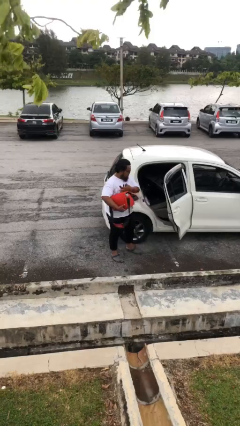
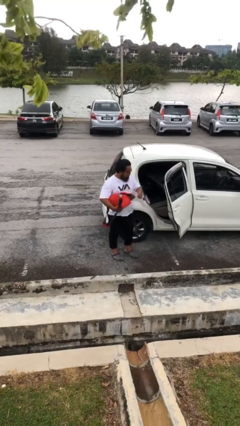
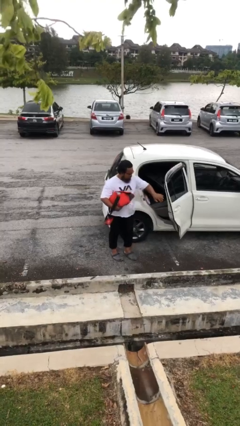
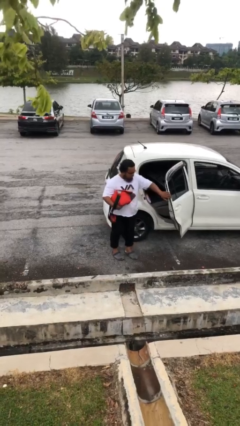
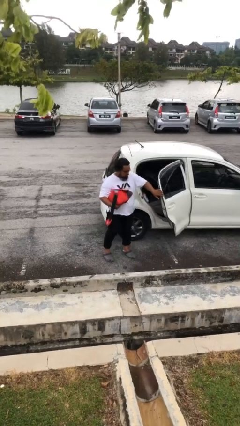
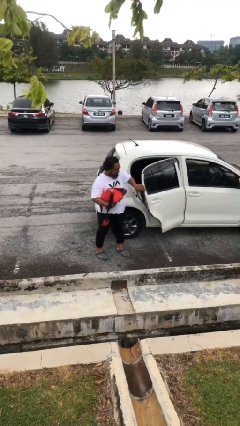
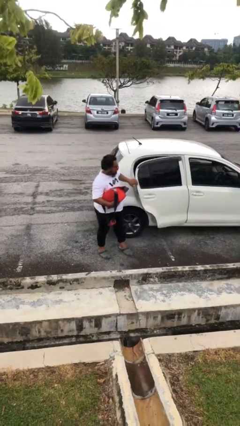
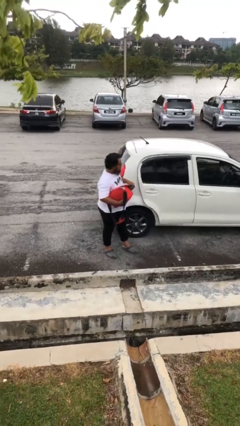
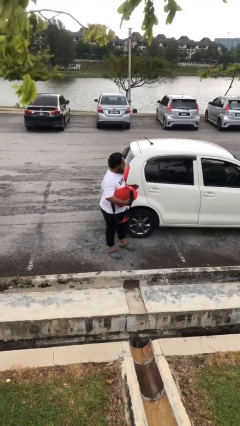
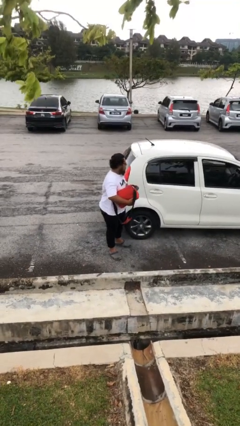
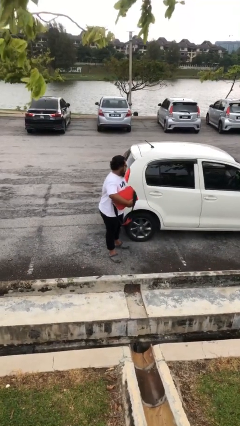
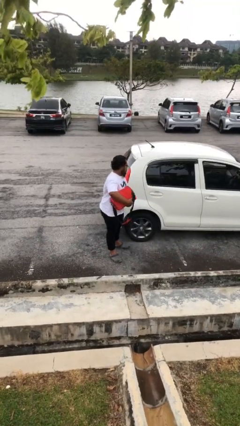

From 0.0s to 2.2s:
person closes car door

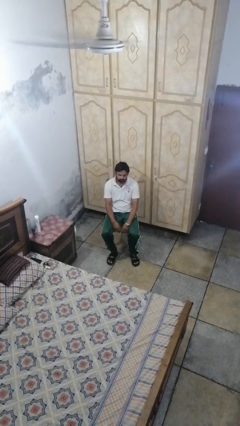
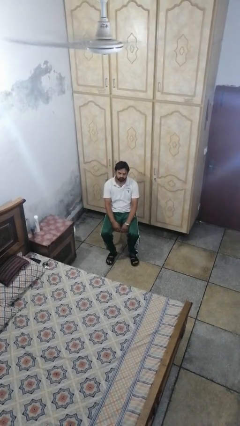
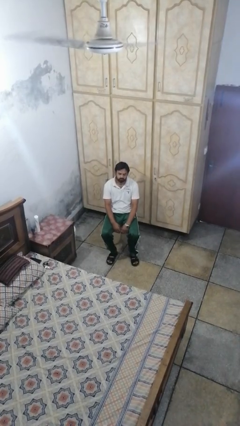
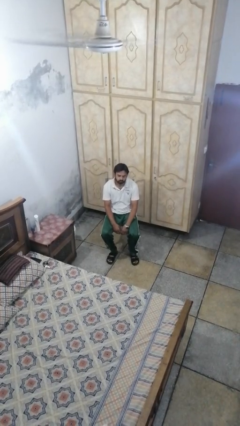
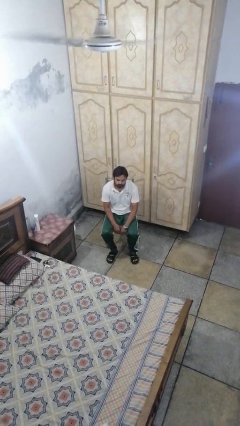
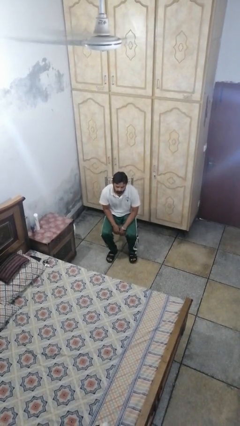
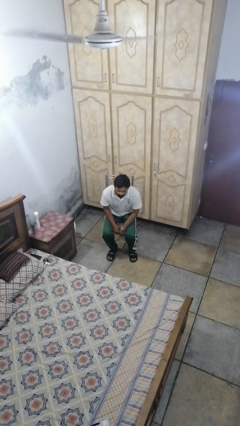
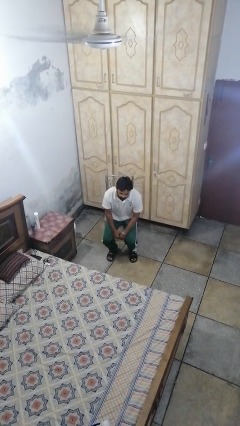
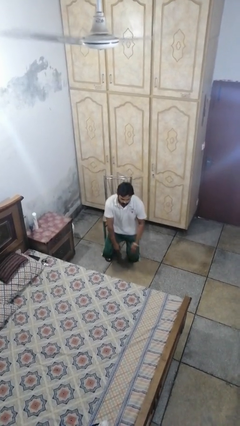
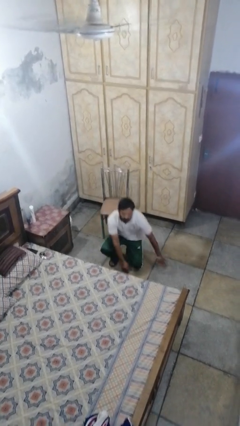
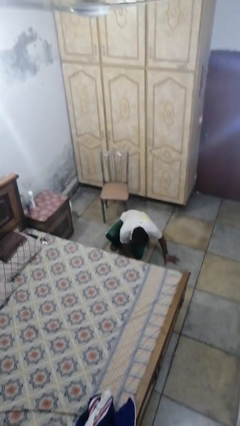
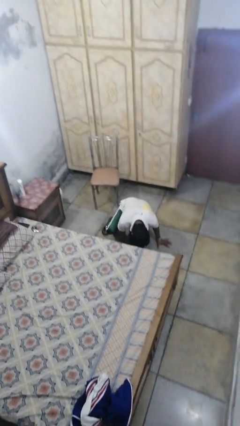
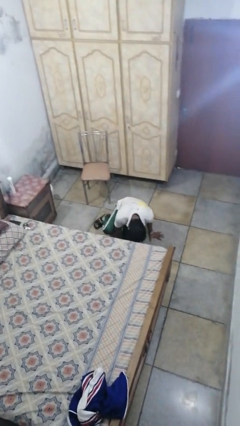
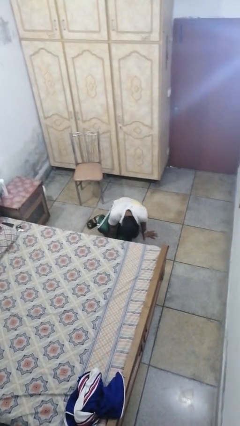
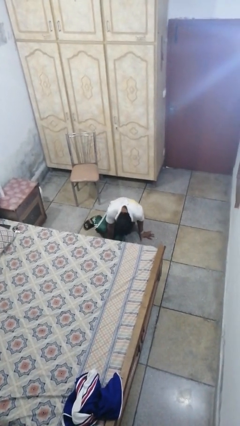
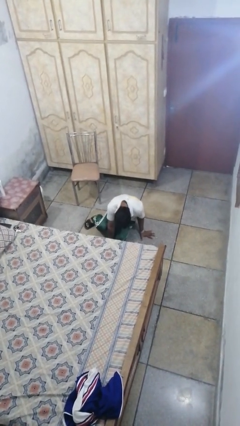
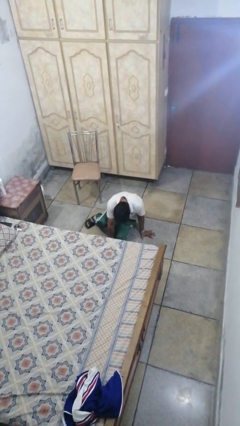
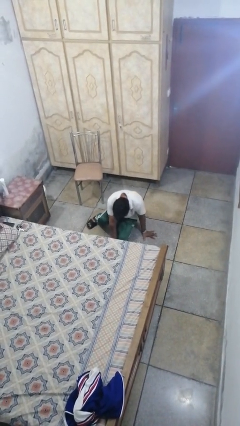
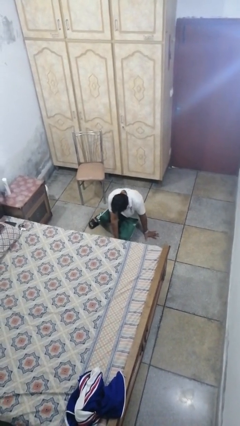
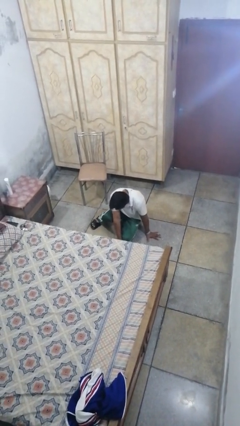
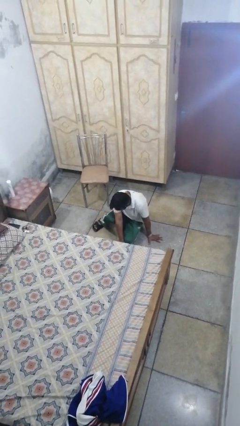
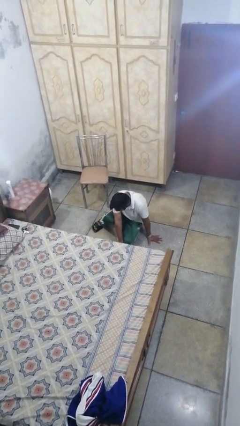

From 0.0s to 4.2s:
person falls from chair

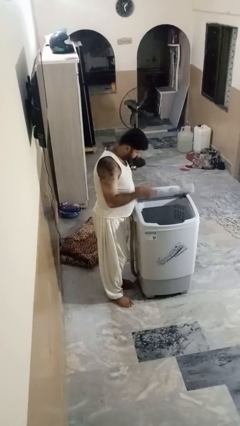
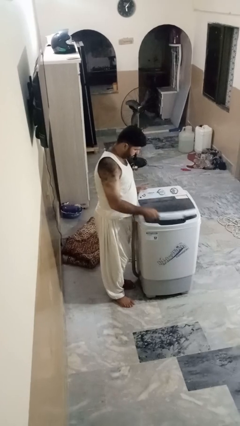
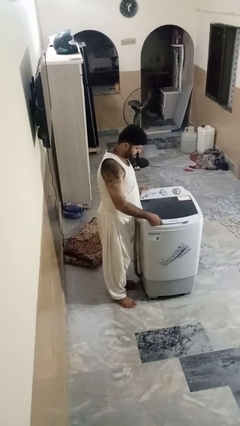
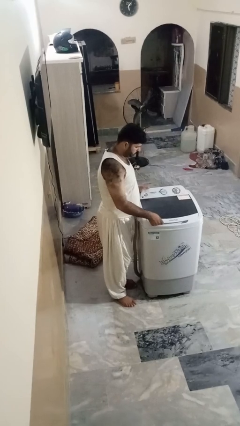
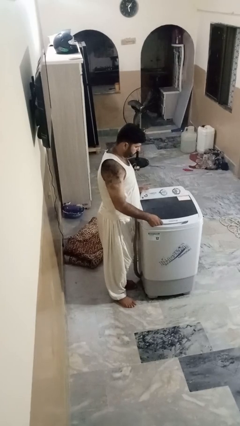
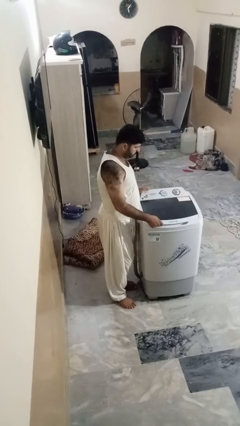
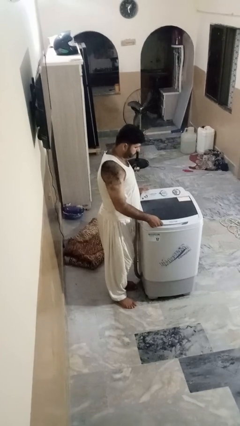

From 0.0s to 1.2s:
person closes clothes washer

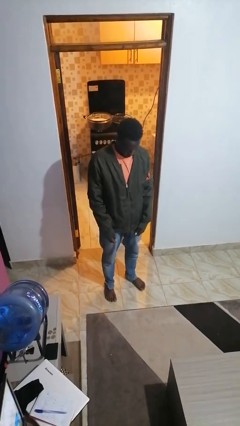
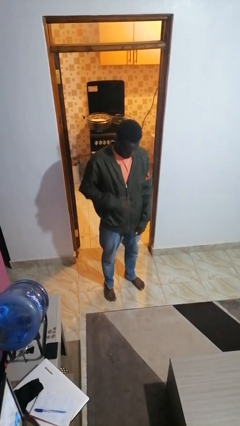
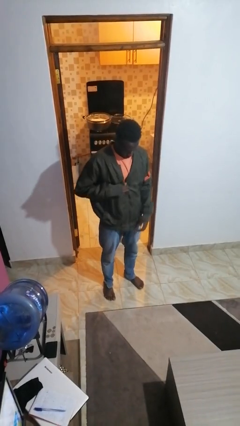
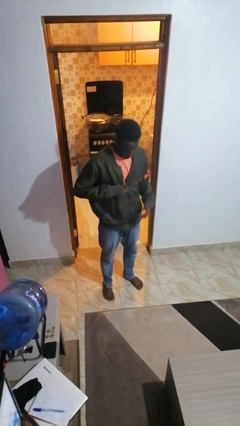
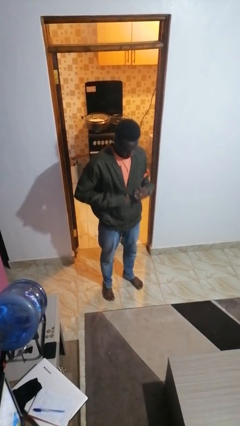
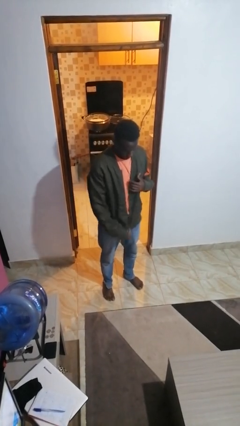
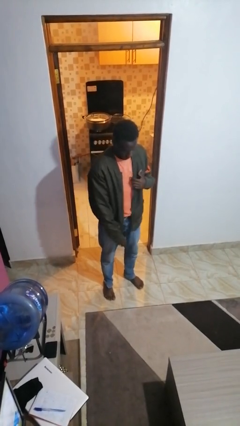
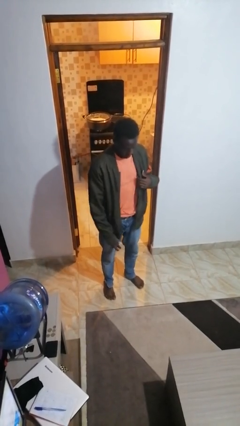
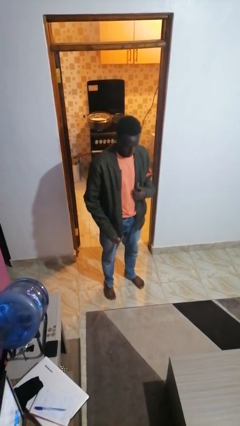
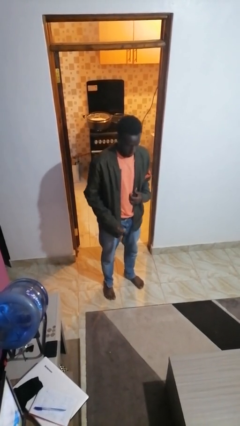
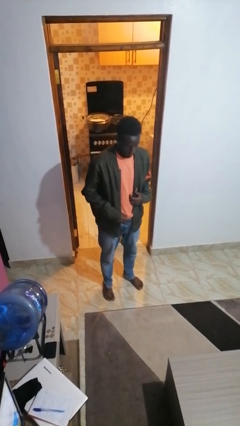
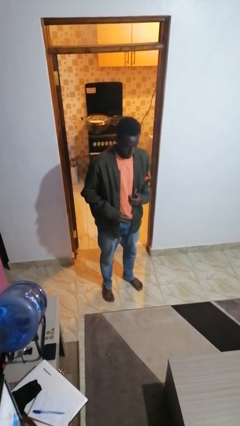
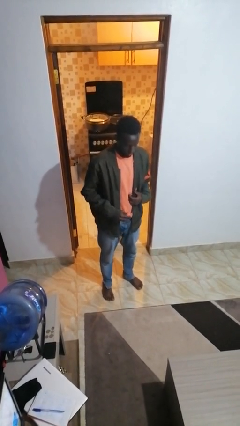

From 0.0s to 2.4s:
person unzips jacket

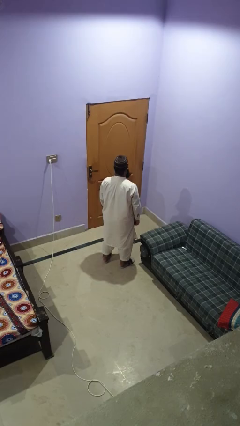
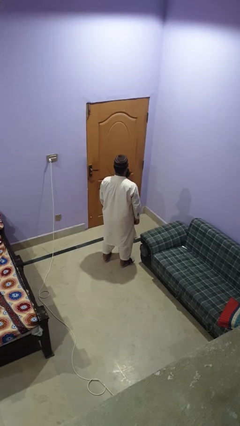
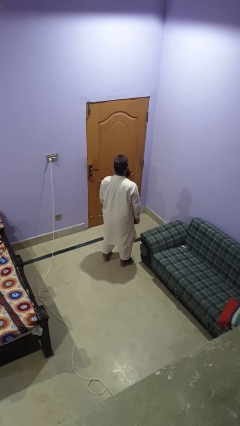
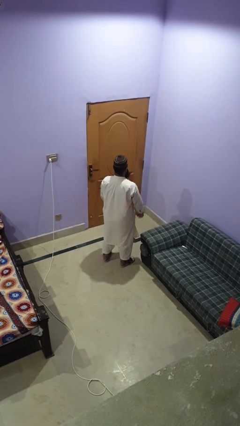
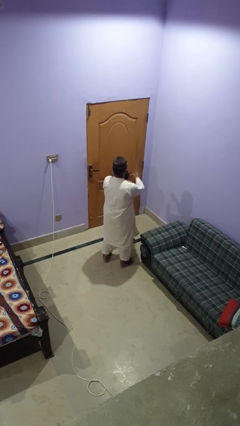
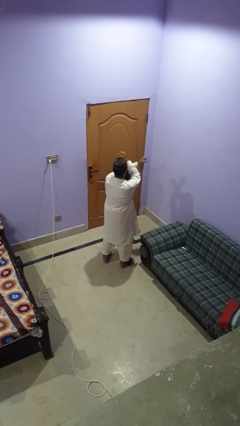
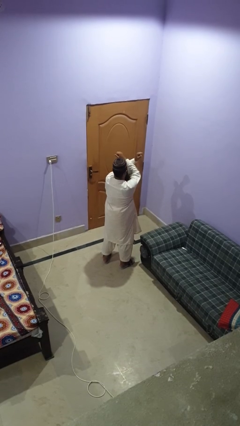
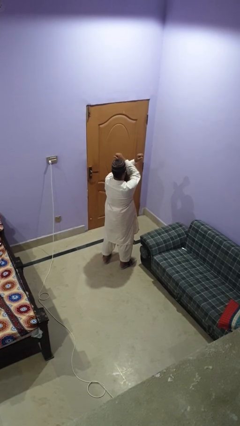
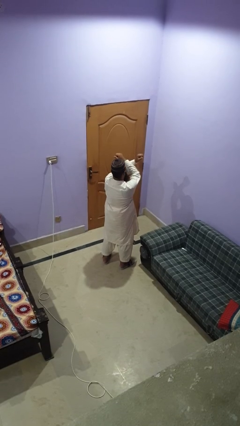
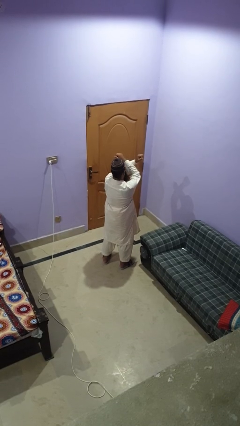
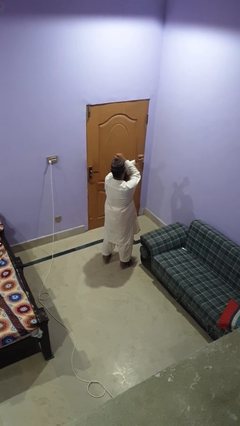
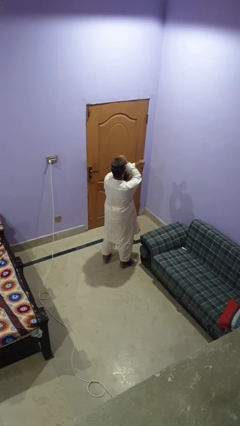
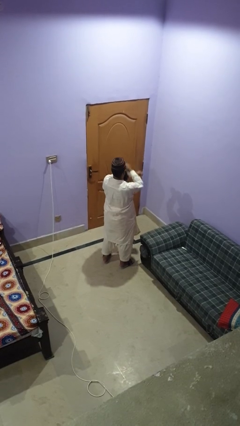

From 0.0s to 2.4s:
person gestures arms x

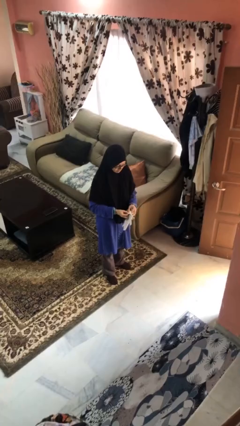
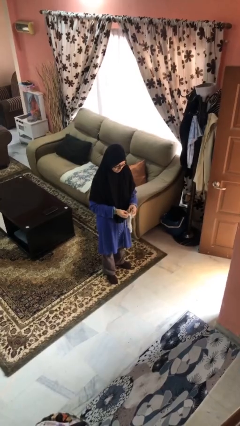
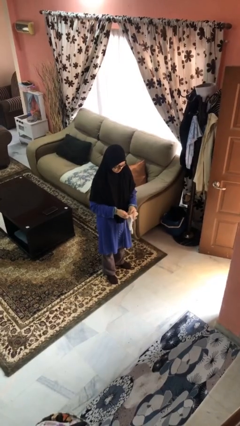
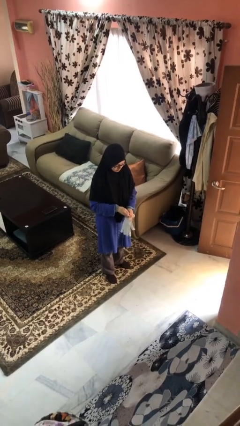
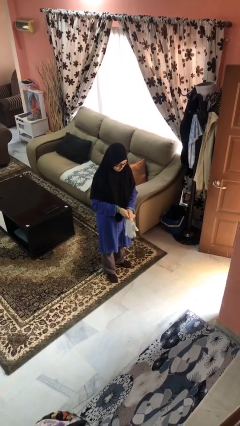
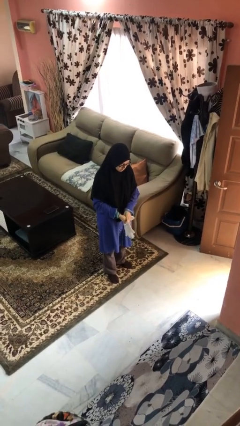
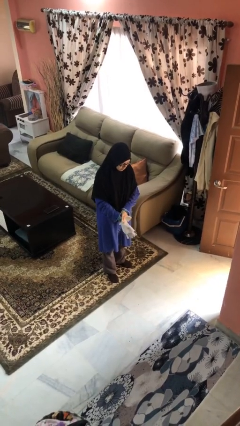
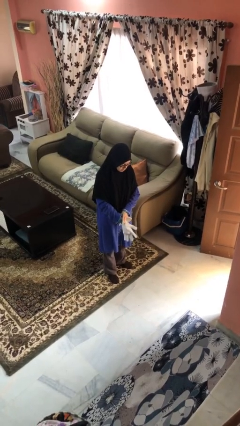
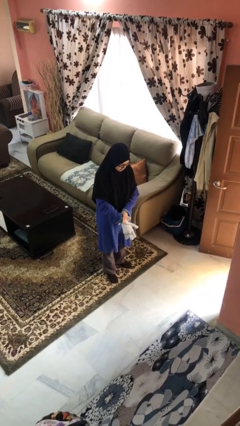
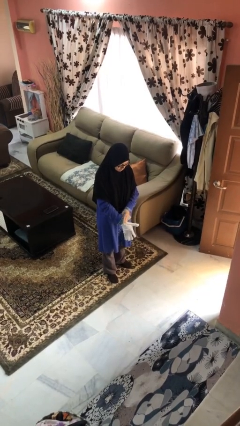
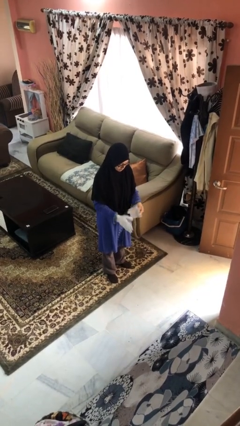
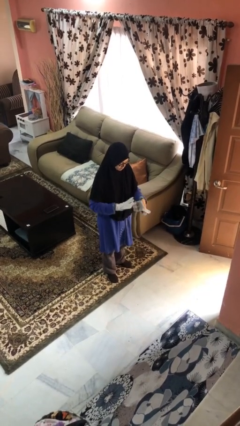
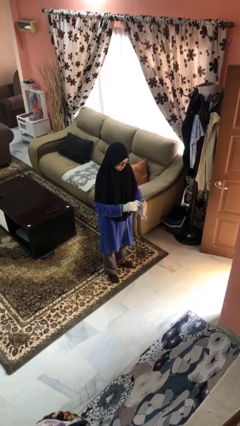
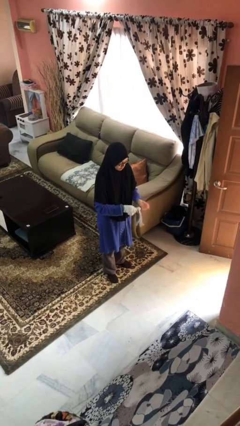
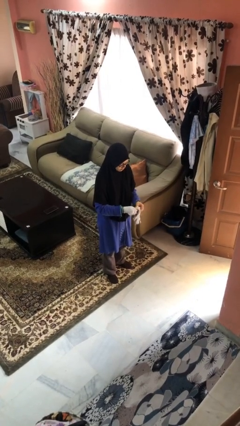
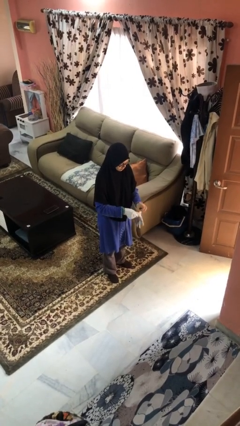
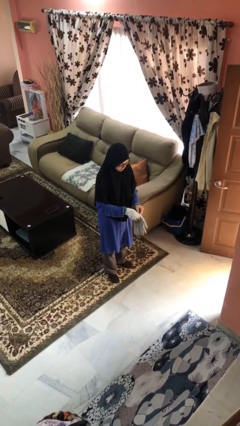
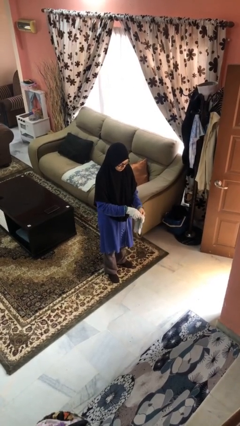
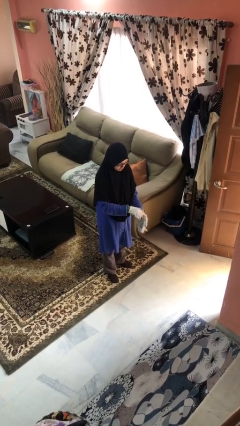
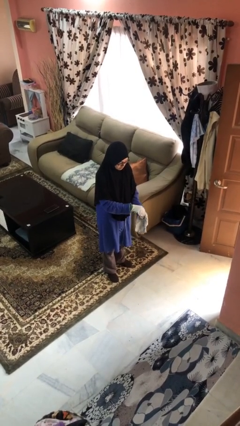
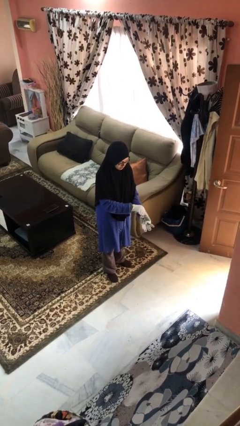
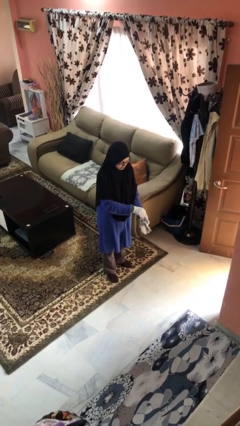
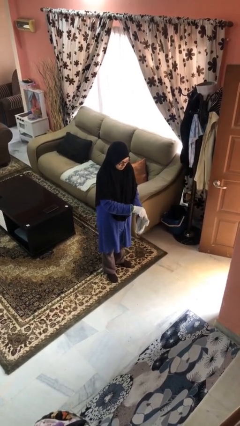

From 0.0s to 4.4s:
person puts on gloves

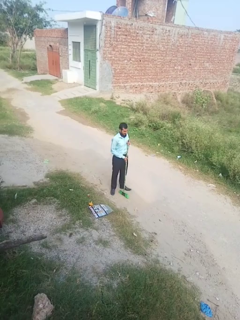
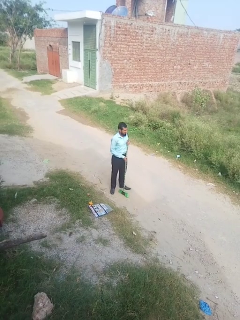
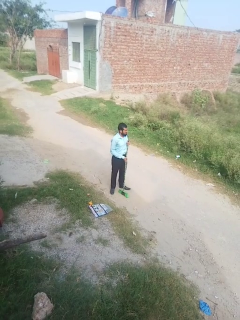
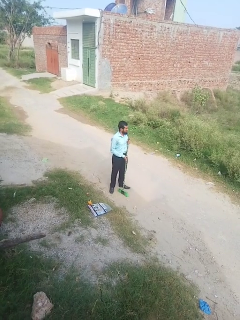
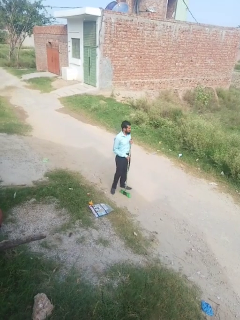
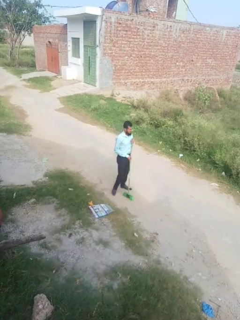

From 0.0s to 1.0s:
person sweeps floor
